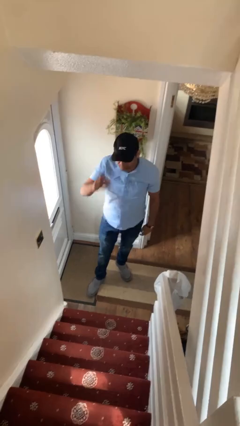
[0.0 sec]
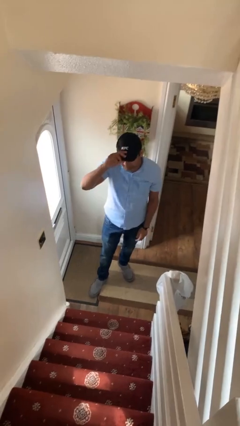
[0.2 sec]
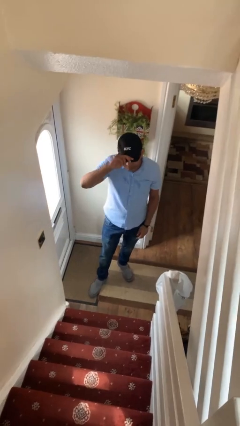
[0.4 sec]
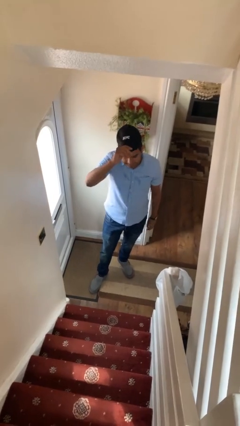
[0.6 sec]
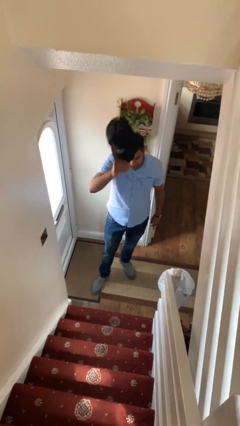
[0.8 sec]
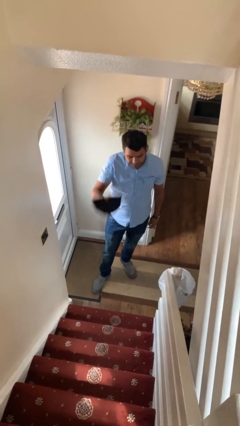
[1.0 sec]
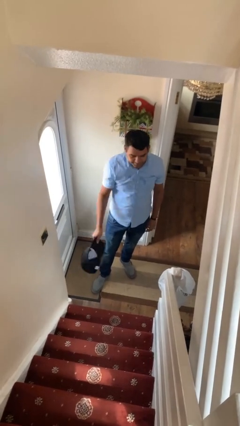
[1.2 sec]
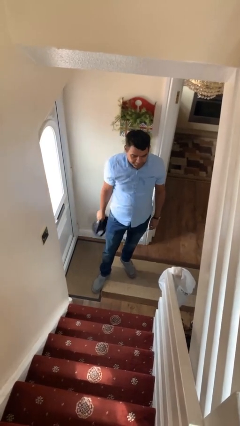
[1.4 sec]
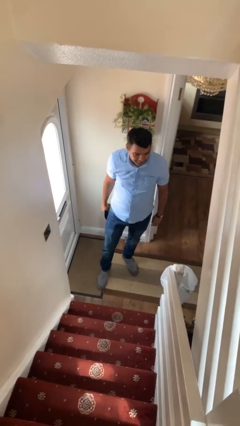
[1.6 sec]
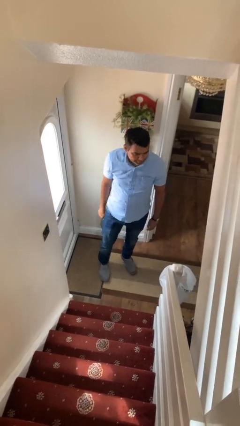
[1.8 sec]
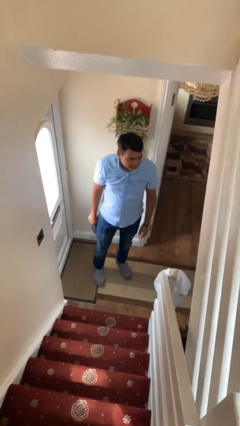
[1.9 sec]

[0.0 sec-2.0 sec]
person takes off hat

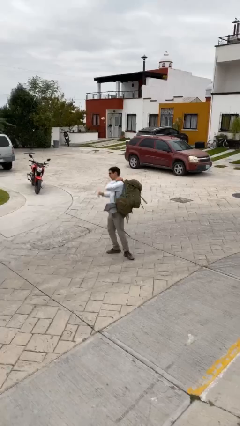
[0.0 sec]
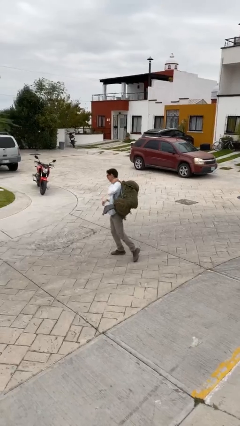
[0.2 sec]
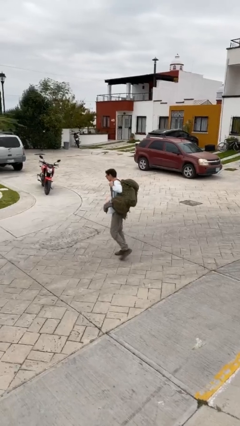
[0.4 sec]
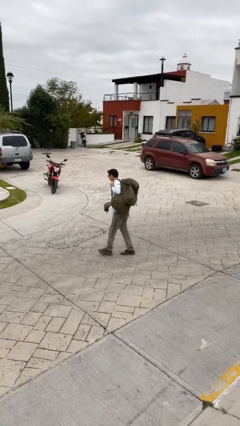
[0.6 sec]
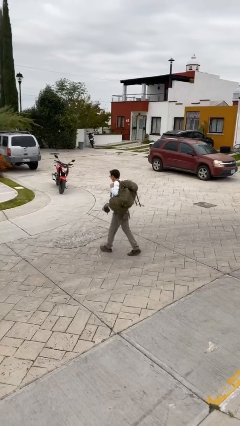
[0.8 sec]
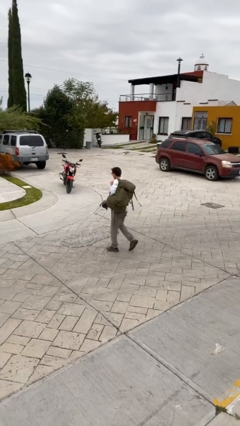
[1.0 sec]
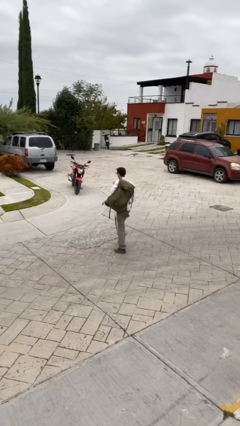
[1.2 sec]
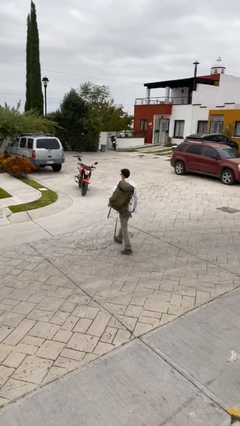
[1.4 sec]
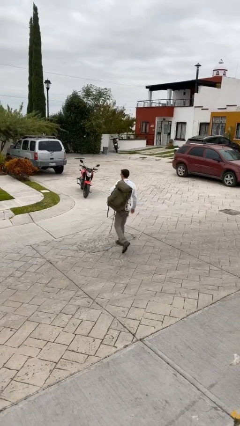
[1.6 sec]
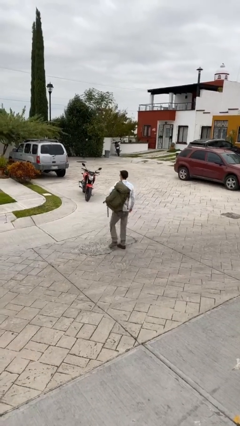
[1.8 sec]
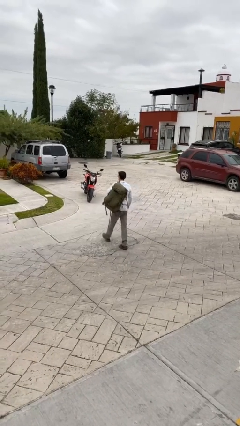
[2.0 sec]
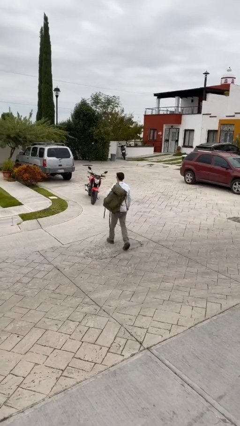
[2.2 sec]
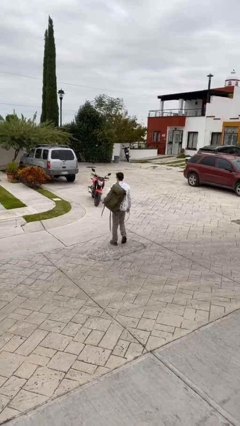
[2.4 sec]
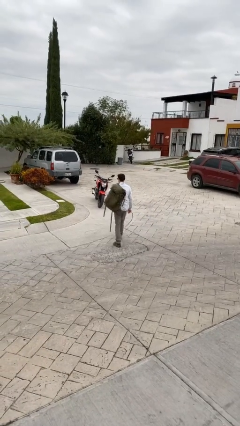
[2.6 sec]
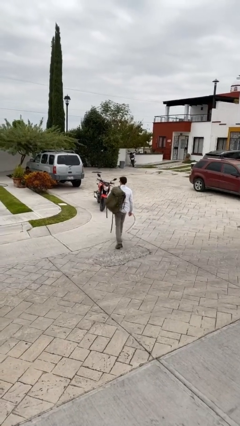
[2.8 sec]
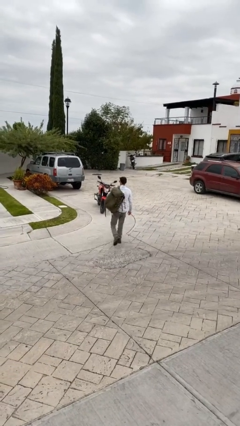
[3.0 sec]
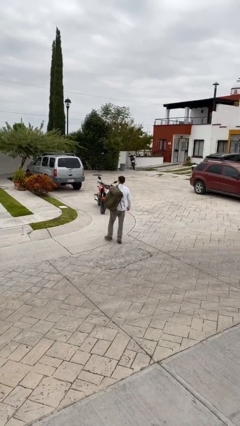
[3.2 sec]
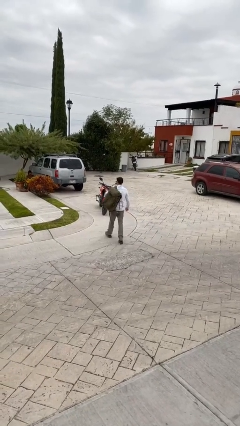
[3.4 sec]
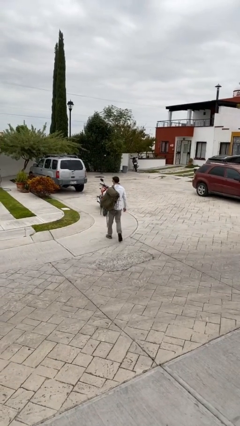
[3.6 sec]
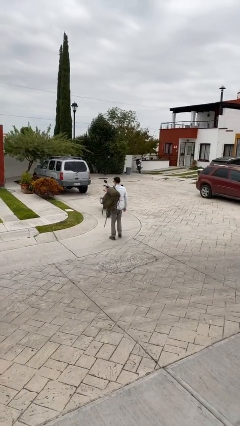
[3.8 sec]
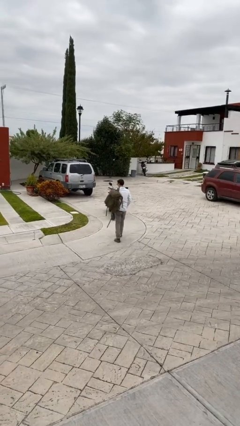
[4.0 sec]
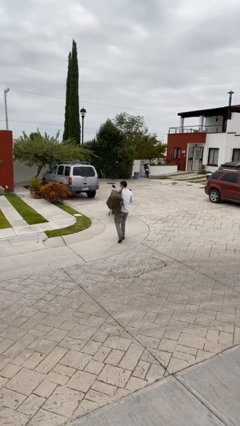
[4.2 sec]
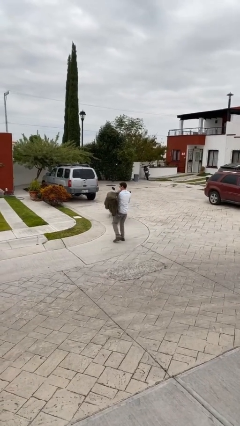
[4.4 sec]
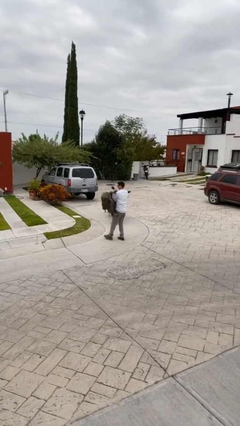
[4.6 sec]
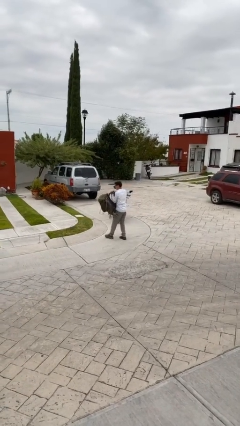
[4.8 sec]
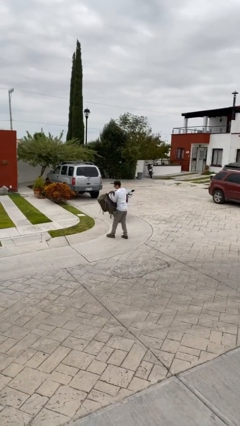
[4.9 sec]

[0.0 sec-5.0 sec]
person carries heavy object

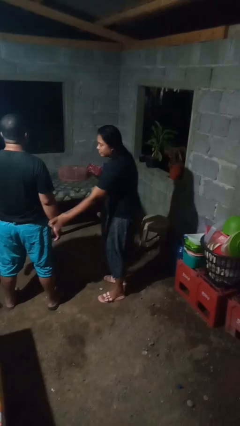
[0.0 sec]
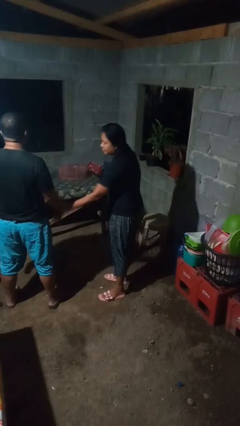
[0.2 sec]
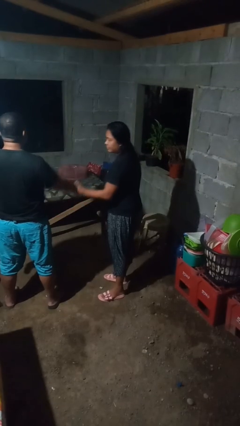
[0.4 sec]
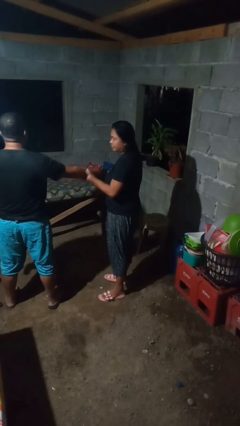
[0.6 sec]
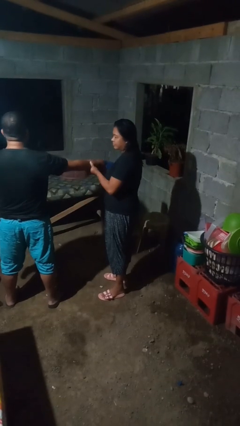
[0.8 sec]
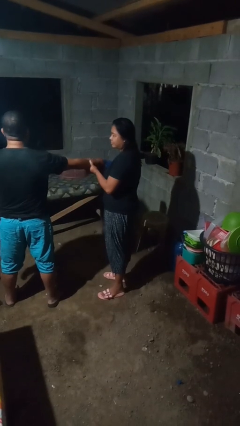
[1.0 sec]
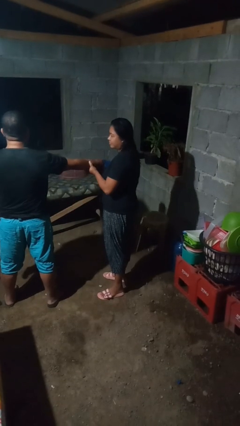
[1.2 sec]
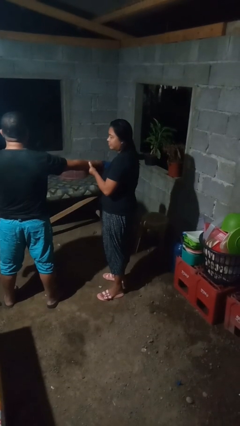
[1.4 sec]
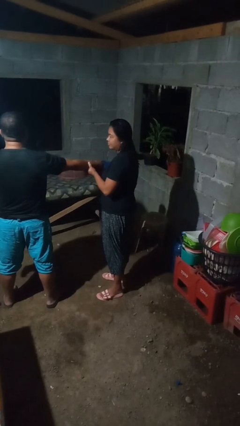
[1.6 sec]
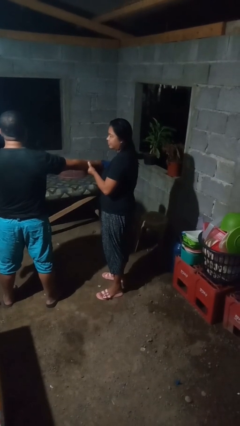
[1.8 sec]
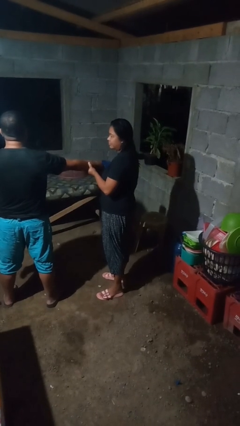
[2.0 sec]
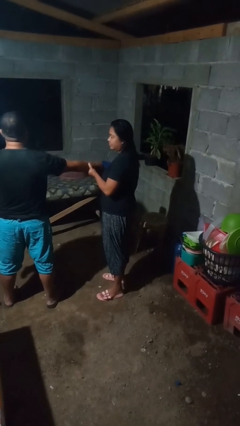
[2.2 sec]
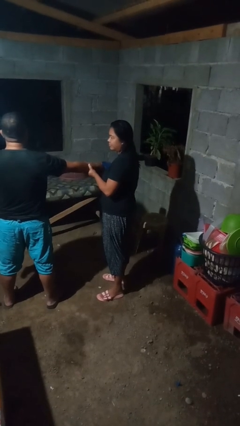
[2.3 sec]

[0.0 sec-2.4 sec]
person grabs person by forearm

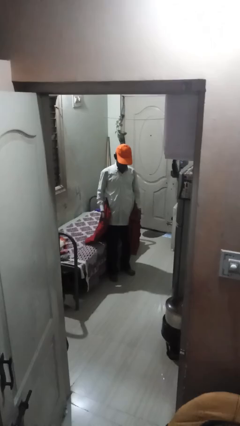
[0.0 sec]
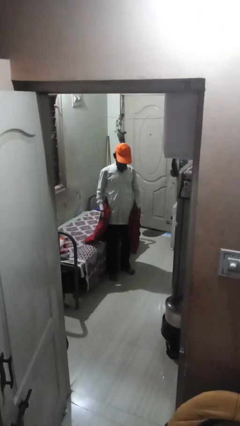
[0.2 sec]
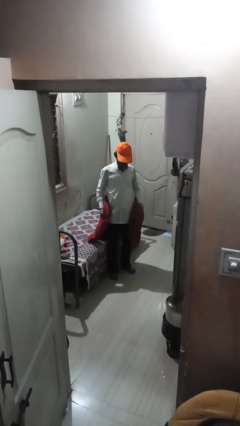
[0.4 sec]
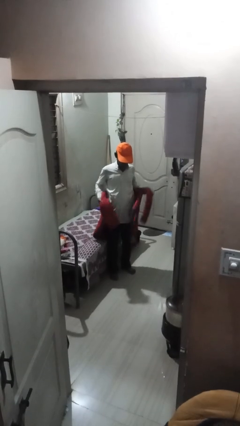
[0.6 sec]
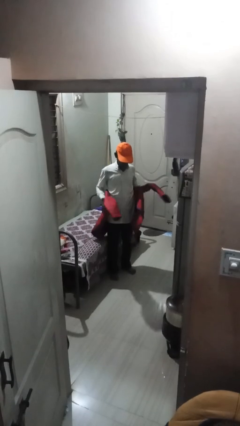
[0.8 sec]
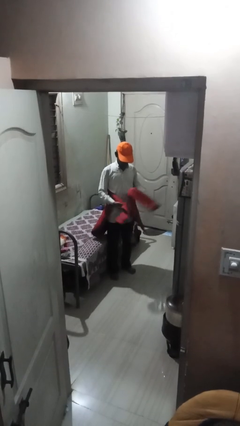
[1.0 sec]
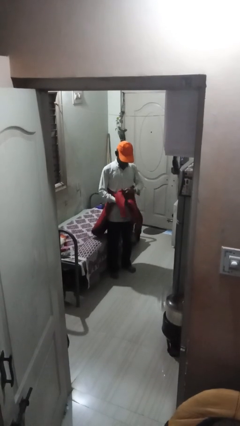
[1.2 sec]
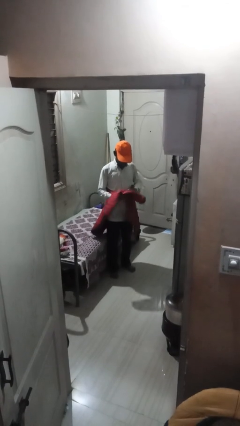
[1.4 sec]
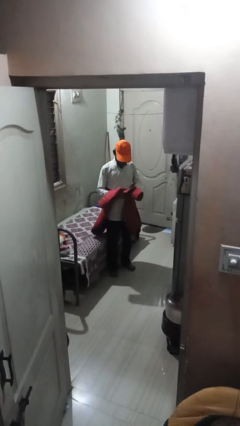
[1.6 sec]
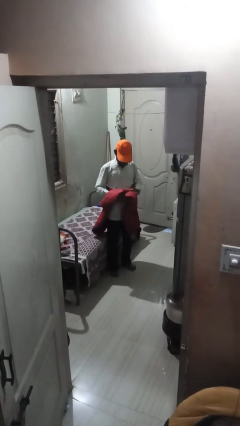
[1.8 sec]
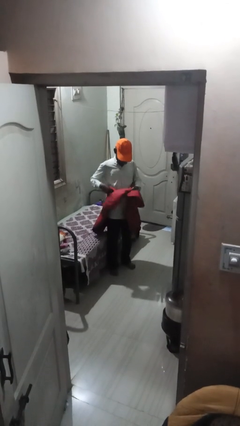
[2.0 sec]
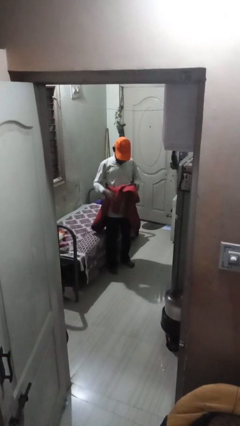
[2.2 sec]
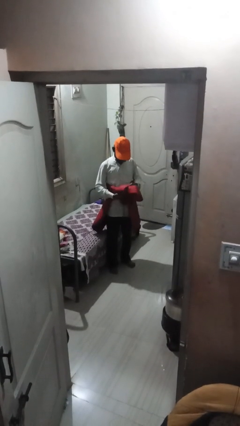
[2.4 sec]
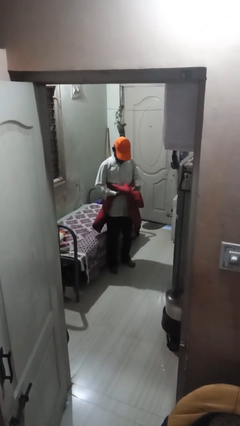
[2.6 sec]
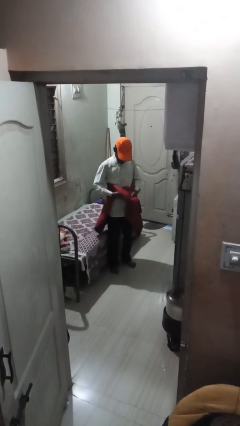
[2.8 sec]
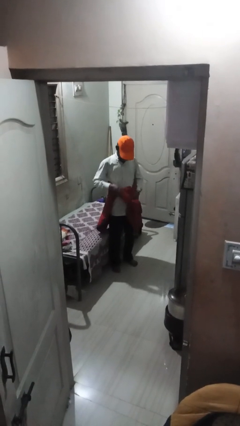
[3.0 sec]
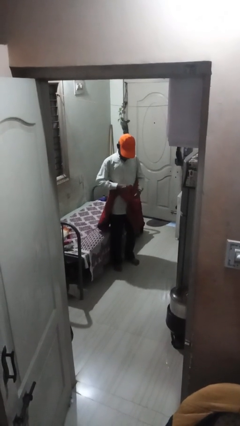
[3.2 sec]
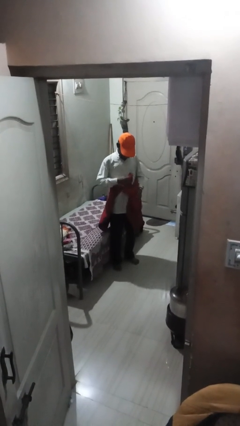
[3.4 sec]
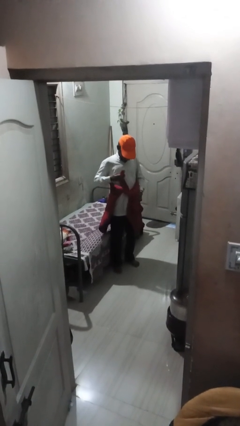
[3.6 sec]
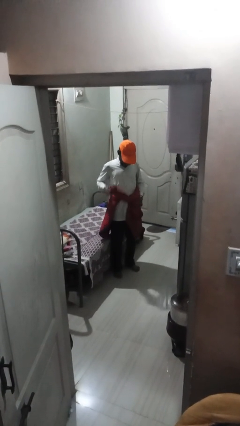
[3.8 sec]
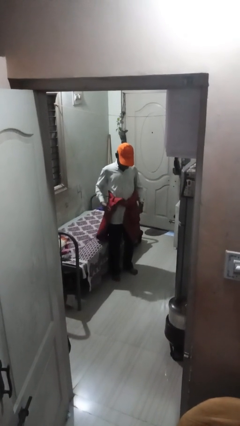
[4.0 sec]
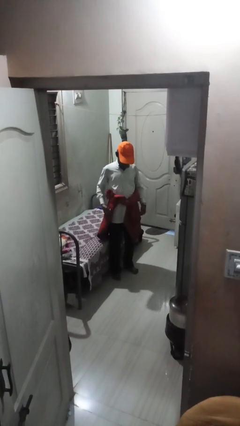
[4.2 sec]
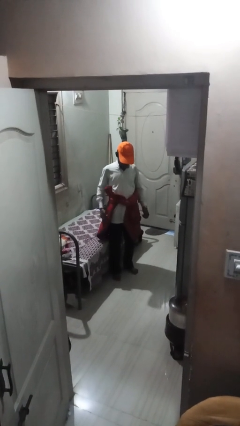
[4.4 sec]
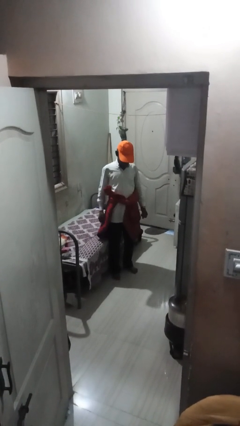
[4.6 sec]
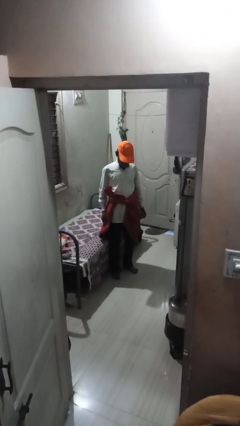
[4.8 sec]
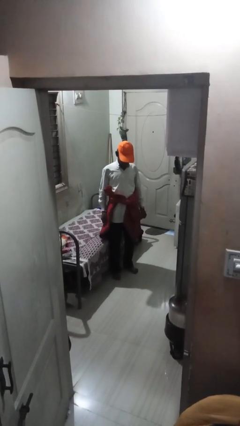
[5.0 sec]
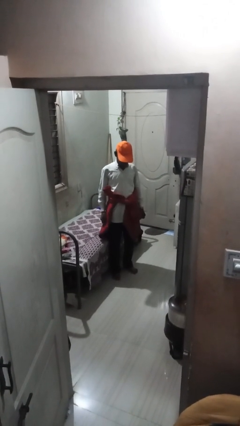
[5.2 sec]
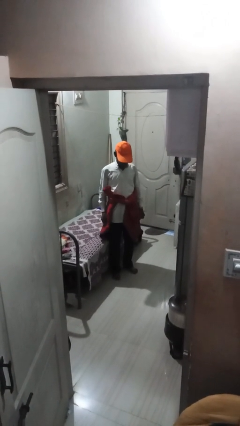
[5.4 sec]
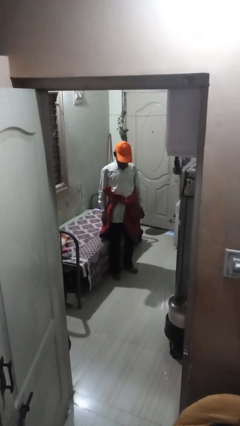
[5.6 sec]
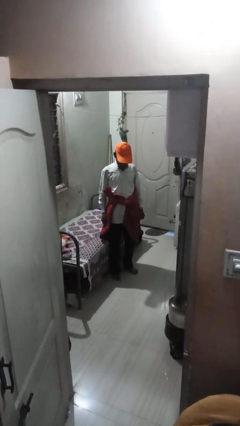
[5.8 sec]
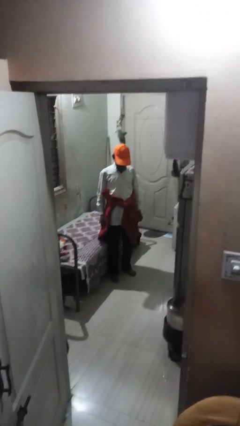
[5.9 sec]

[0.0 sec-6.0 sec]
person ties jacket around waist

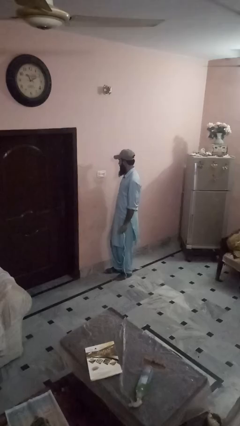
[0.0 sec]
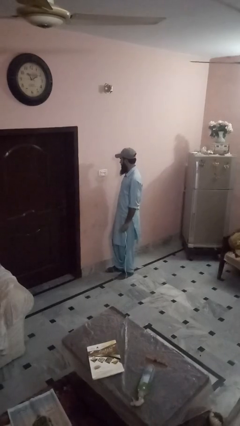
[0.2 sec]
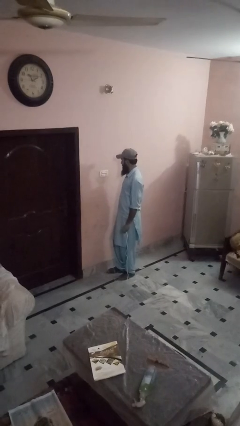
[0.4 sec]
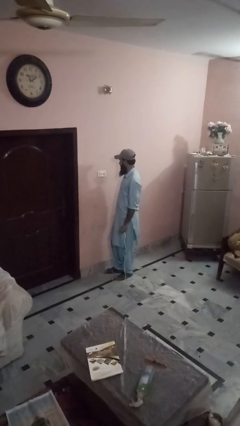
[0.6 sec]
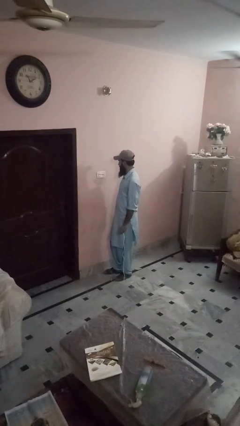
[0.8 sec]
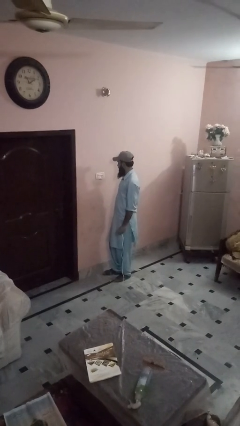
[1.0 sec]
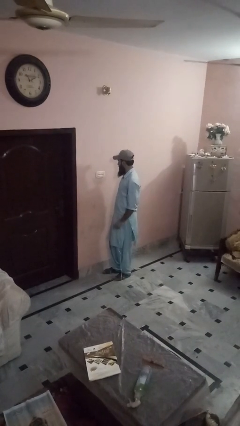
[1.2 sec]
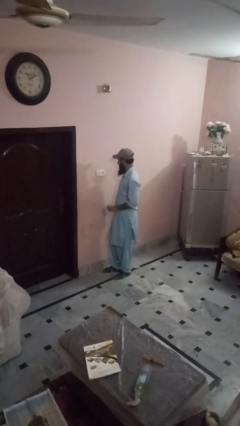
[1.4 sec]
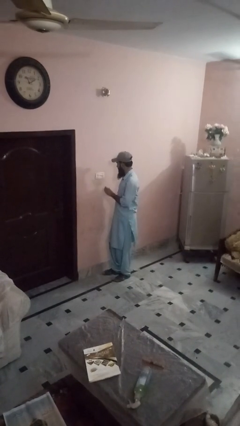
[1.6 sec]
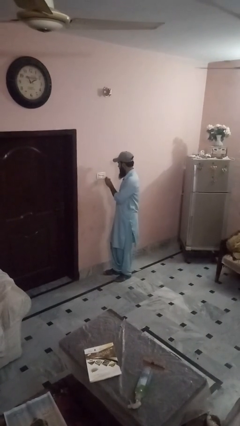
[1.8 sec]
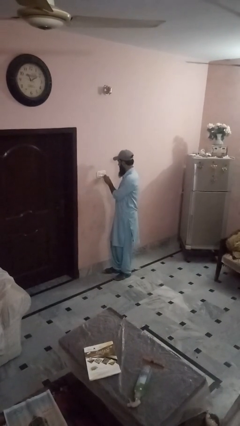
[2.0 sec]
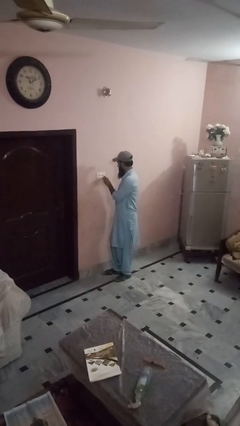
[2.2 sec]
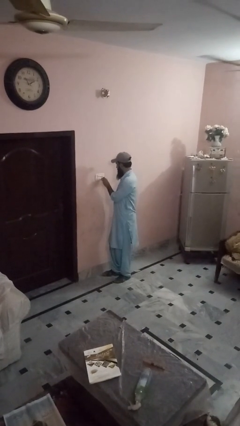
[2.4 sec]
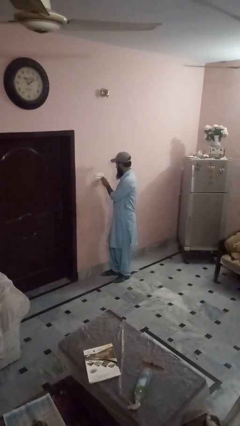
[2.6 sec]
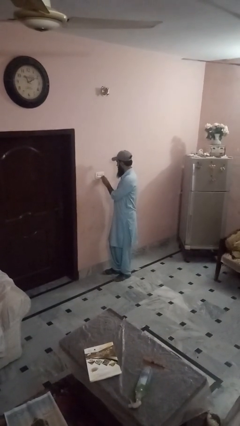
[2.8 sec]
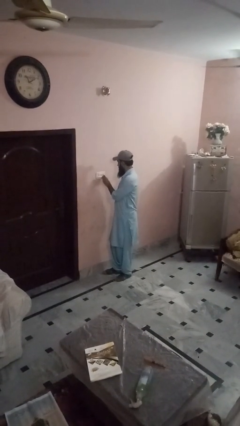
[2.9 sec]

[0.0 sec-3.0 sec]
person plugs into electrical socket
